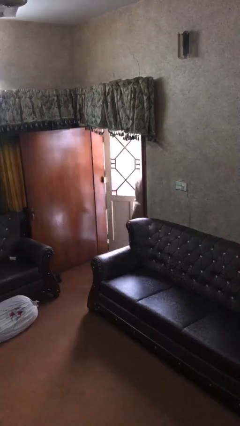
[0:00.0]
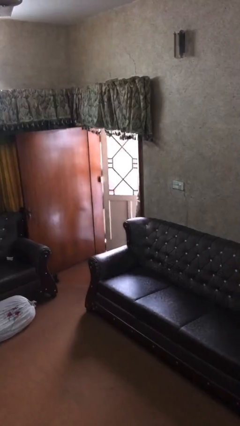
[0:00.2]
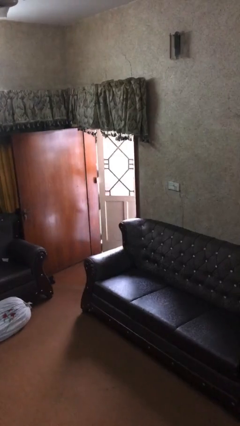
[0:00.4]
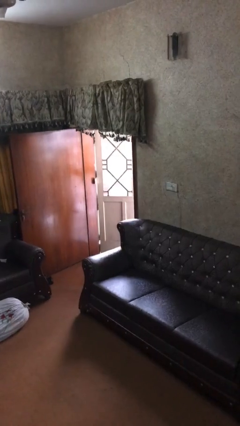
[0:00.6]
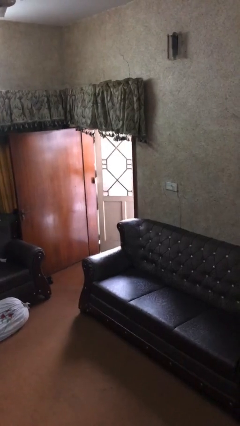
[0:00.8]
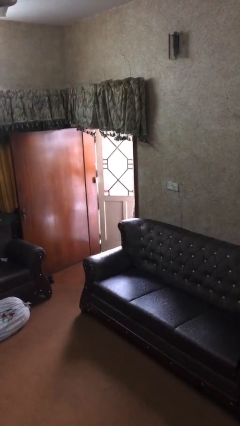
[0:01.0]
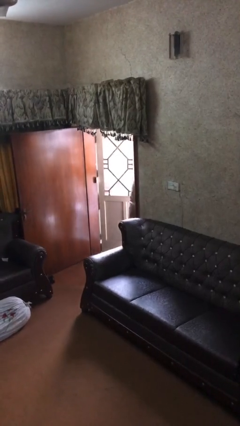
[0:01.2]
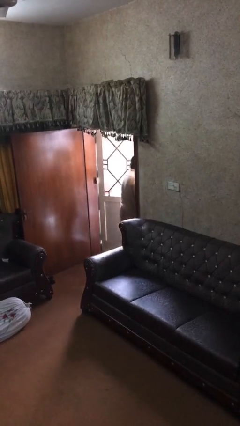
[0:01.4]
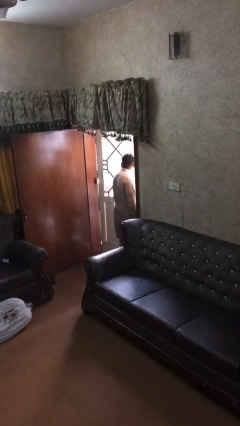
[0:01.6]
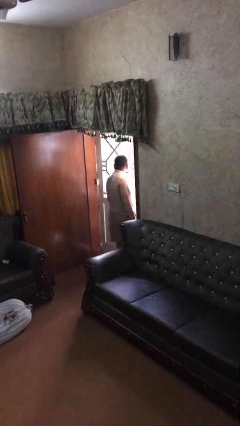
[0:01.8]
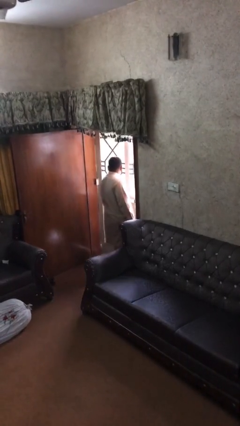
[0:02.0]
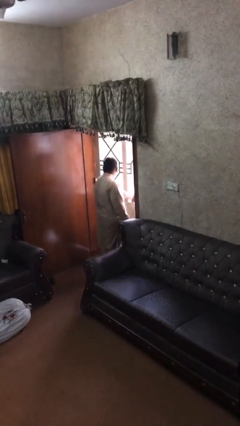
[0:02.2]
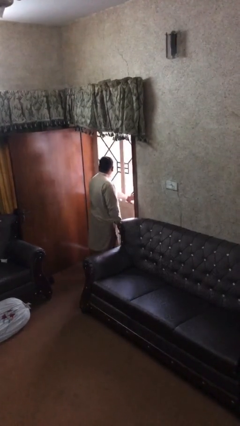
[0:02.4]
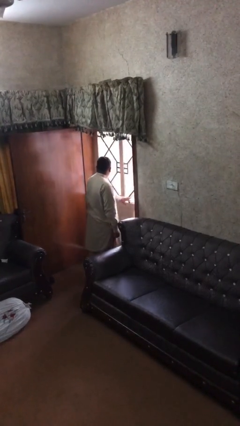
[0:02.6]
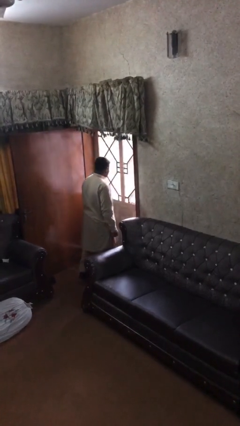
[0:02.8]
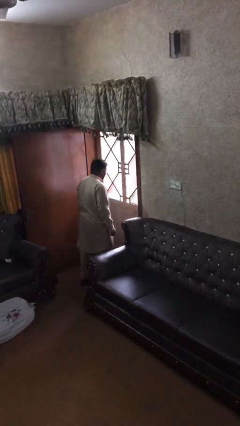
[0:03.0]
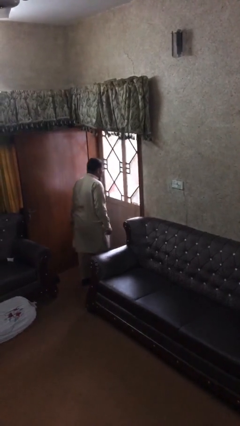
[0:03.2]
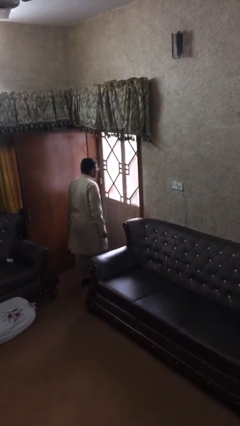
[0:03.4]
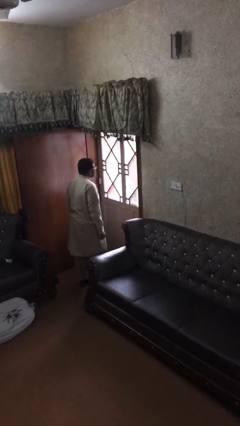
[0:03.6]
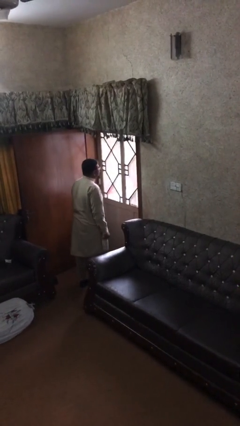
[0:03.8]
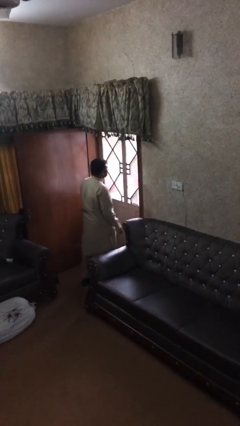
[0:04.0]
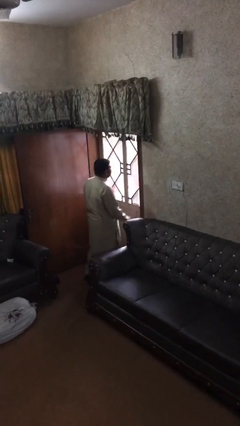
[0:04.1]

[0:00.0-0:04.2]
person closes facility door

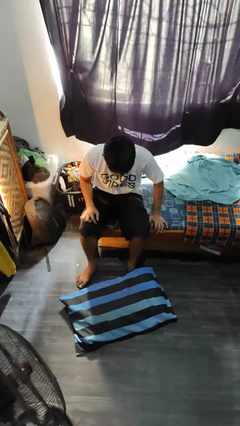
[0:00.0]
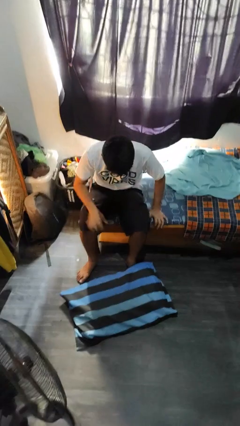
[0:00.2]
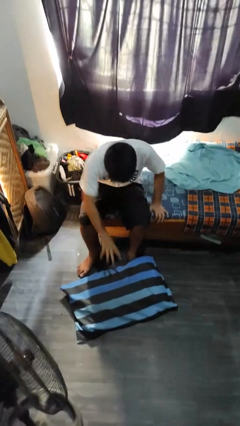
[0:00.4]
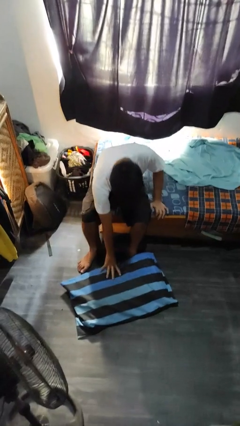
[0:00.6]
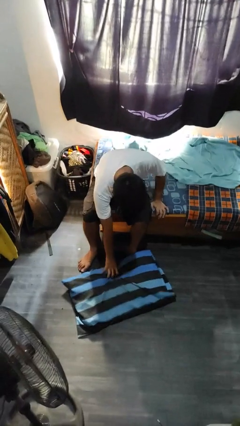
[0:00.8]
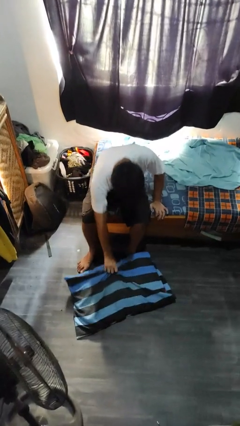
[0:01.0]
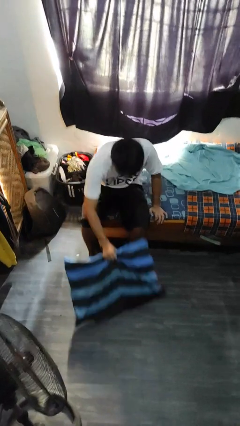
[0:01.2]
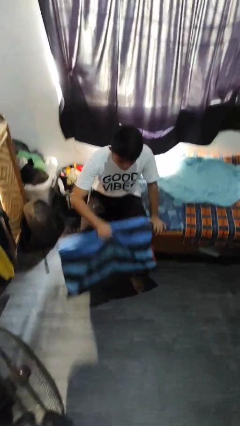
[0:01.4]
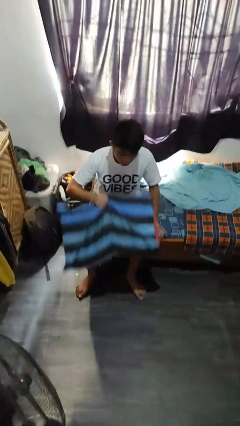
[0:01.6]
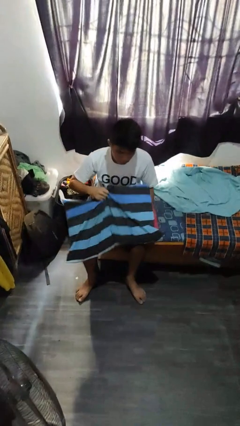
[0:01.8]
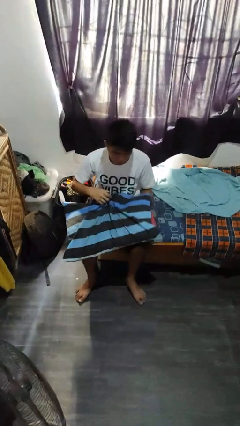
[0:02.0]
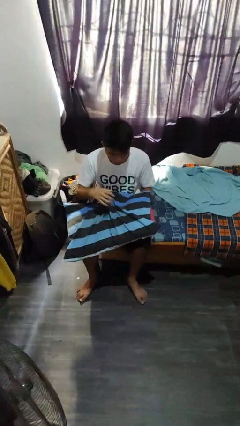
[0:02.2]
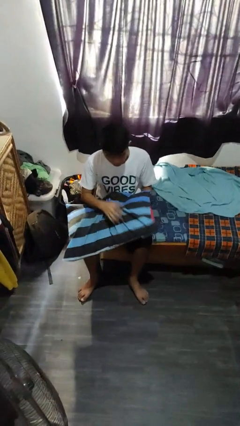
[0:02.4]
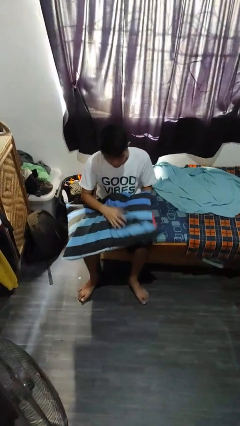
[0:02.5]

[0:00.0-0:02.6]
person picks up object from floor

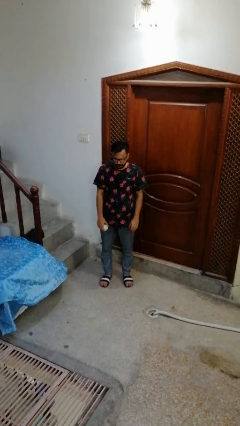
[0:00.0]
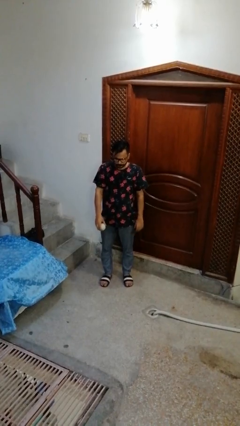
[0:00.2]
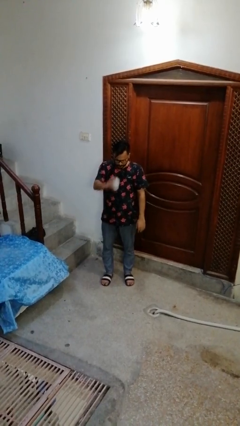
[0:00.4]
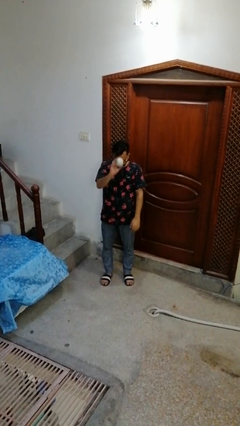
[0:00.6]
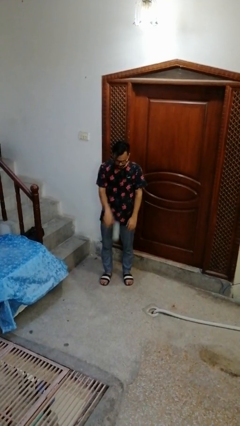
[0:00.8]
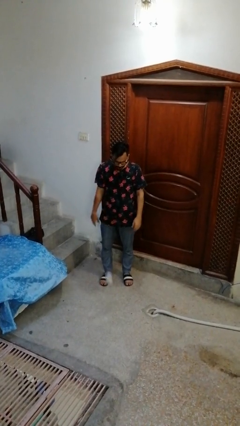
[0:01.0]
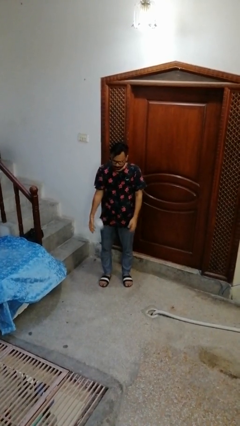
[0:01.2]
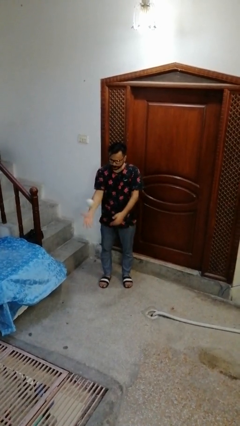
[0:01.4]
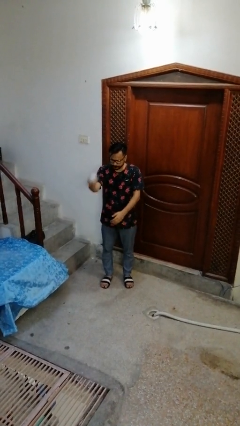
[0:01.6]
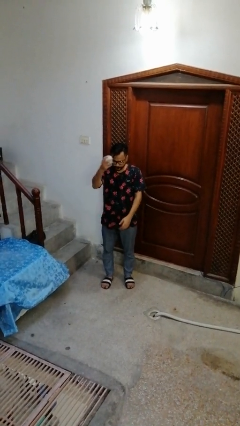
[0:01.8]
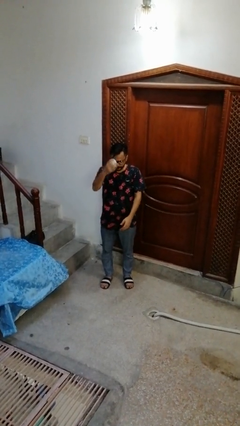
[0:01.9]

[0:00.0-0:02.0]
person bounces ball on floor

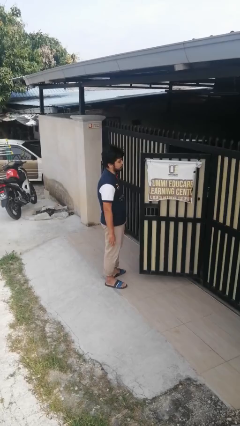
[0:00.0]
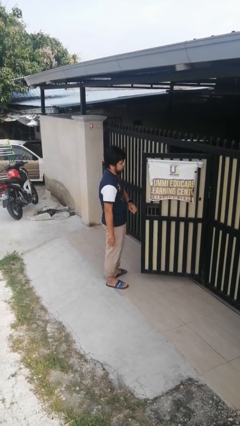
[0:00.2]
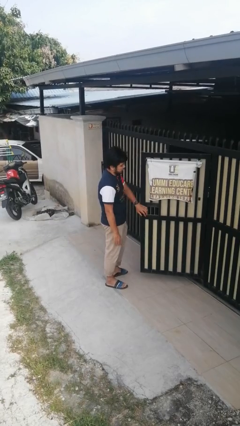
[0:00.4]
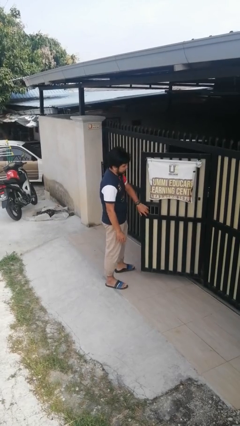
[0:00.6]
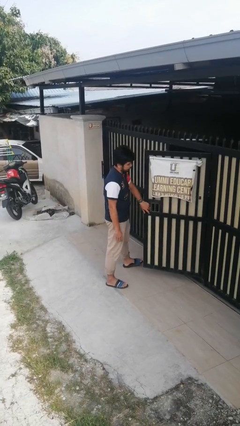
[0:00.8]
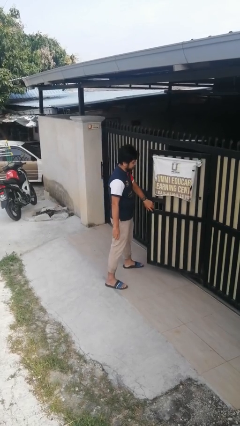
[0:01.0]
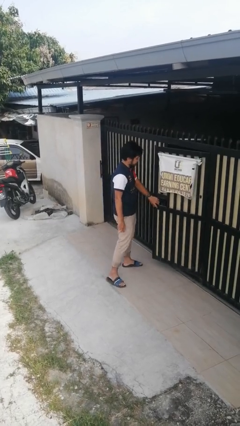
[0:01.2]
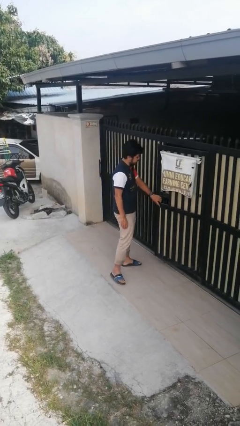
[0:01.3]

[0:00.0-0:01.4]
person closes gate

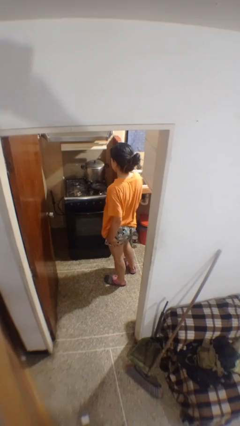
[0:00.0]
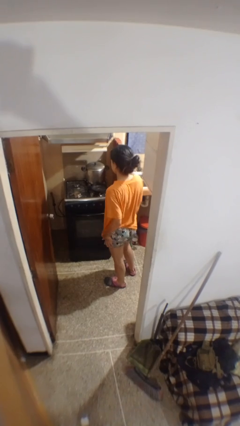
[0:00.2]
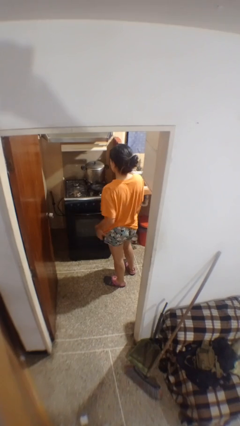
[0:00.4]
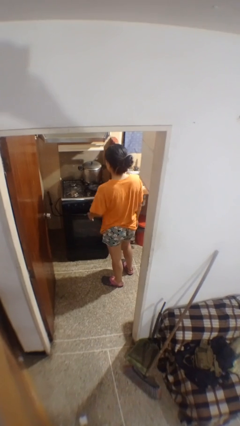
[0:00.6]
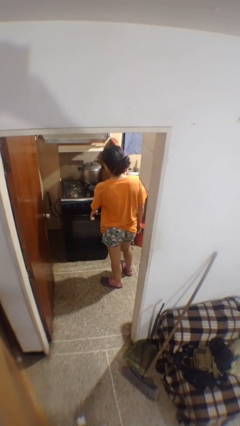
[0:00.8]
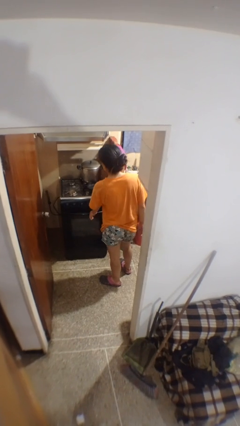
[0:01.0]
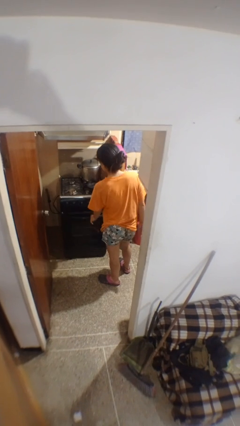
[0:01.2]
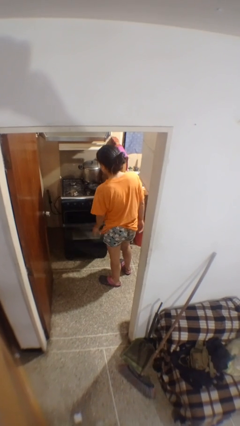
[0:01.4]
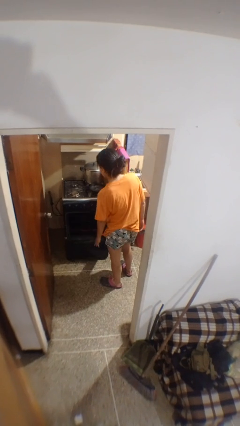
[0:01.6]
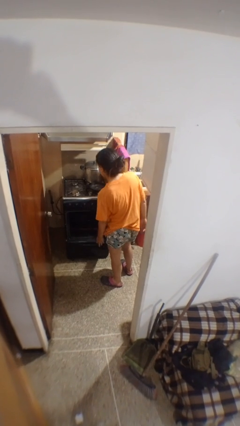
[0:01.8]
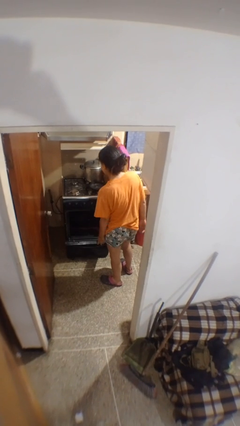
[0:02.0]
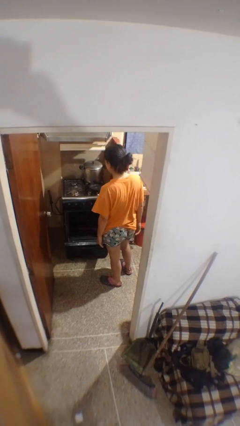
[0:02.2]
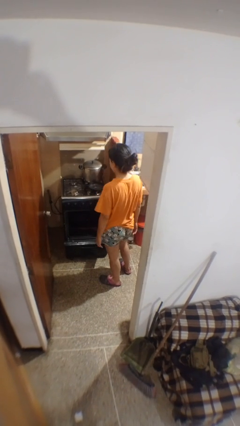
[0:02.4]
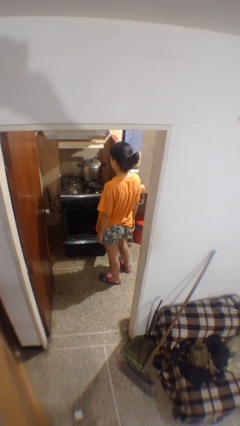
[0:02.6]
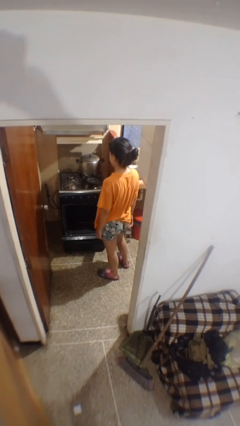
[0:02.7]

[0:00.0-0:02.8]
person opens oven door

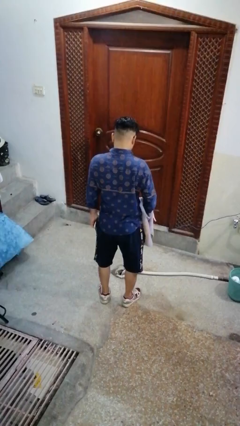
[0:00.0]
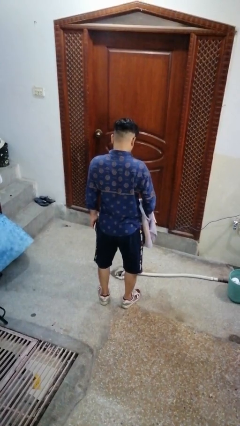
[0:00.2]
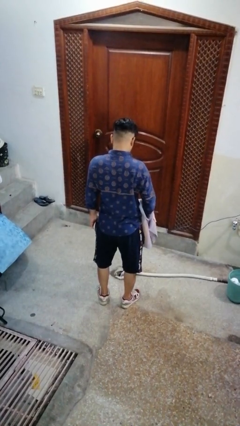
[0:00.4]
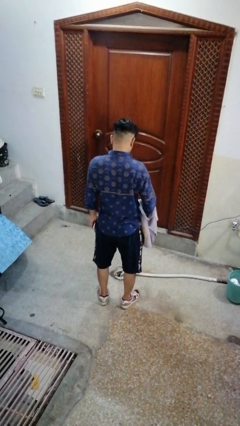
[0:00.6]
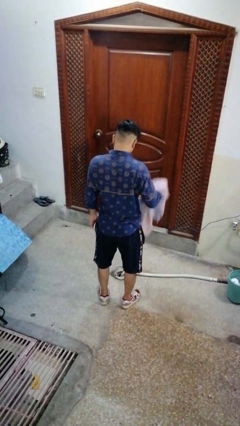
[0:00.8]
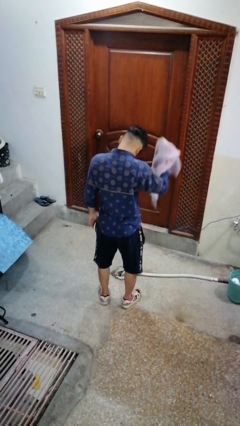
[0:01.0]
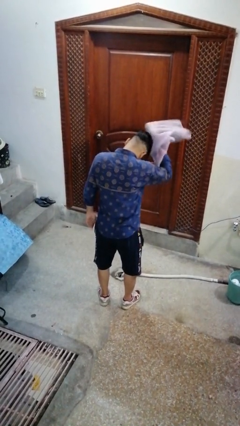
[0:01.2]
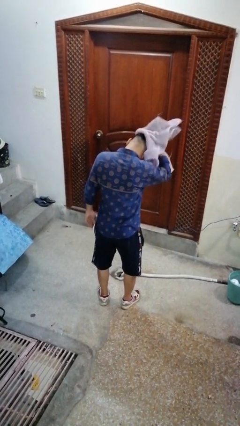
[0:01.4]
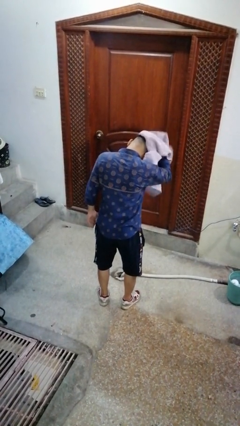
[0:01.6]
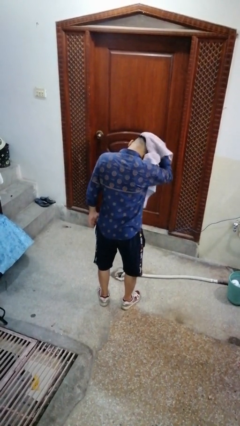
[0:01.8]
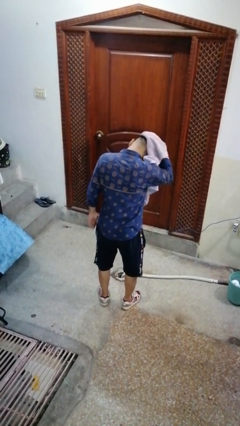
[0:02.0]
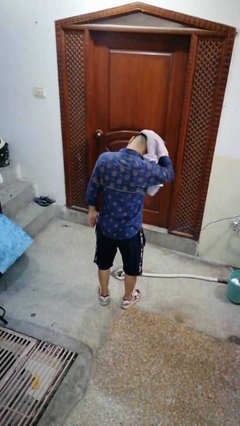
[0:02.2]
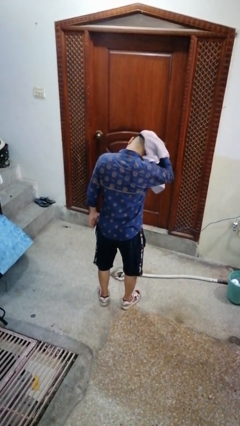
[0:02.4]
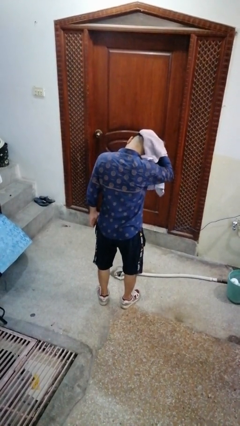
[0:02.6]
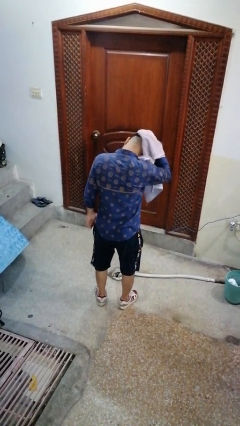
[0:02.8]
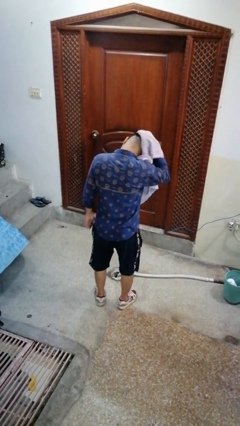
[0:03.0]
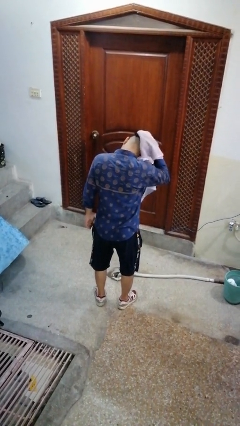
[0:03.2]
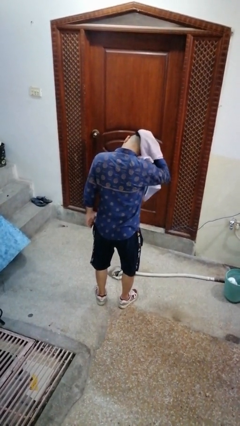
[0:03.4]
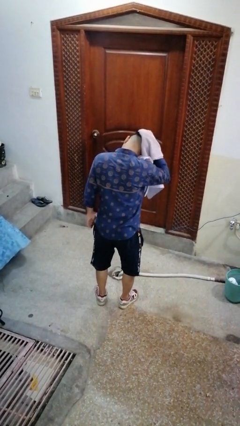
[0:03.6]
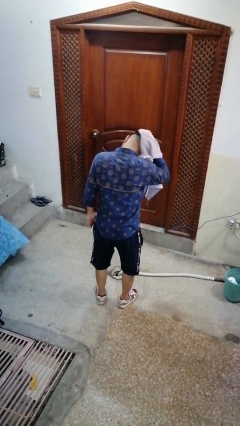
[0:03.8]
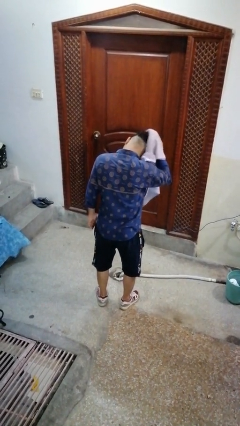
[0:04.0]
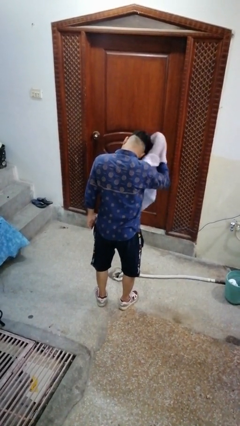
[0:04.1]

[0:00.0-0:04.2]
person dries hair with towel
